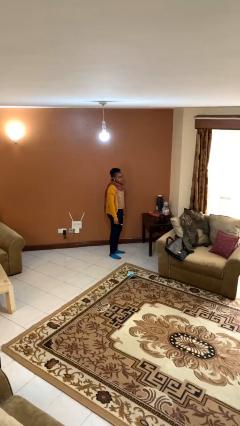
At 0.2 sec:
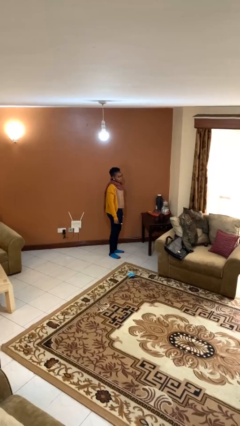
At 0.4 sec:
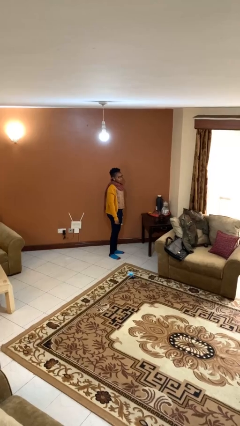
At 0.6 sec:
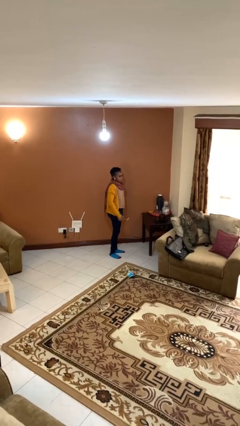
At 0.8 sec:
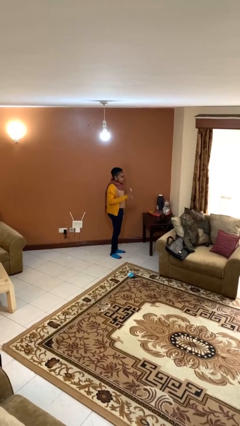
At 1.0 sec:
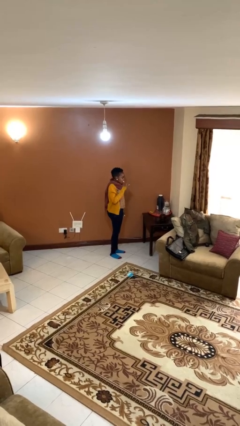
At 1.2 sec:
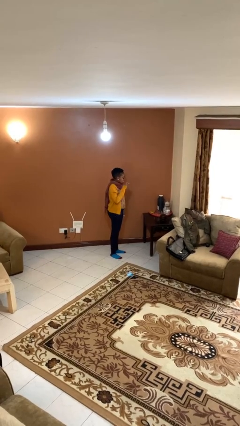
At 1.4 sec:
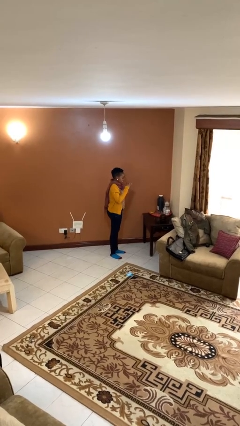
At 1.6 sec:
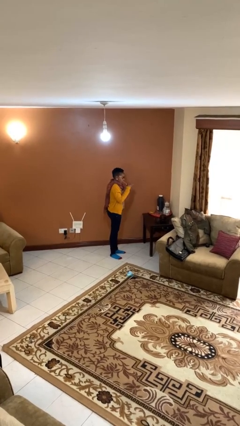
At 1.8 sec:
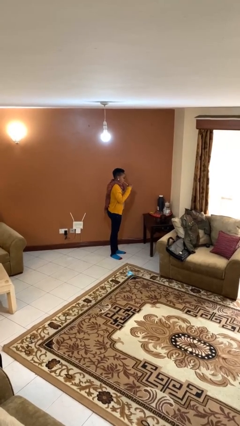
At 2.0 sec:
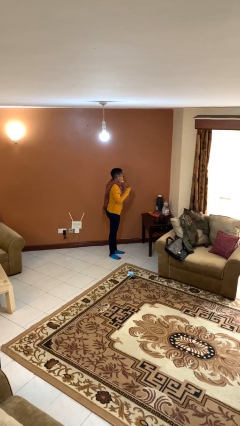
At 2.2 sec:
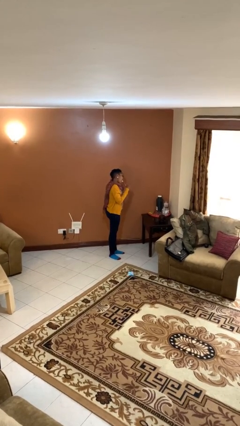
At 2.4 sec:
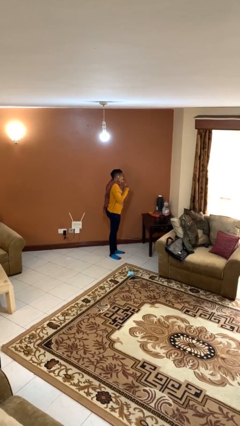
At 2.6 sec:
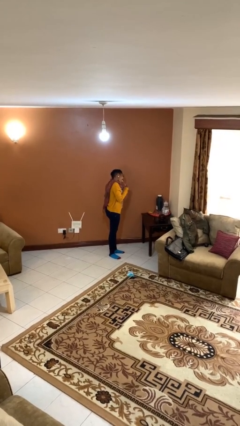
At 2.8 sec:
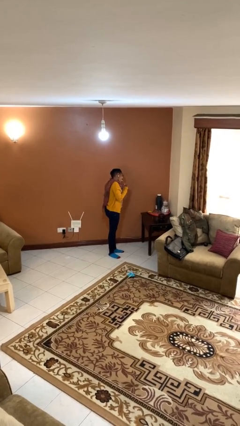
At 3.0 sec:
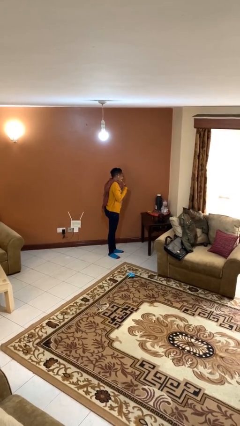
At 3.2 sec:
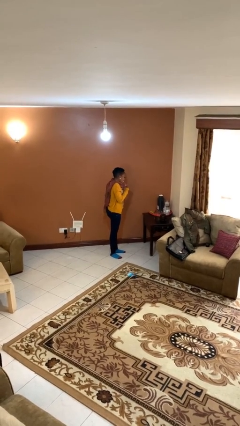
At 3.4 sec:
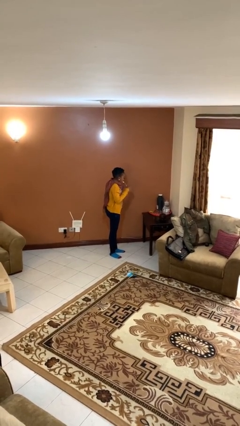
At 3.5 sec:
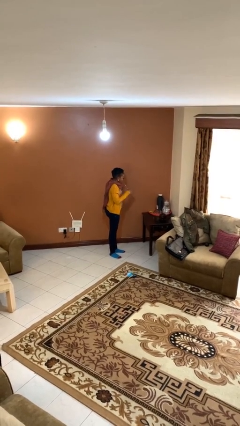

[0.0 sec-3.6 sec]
person brushes teeth

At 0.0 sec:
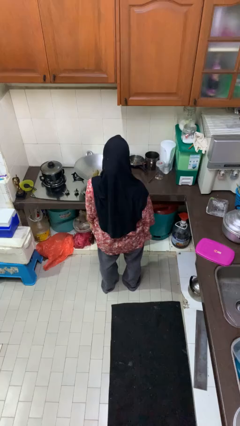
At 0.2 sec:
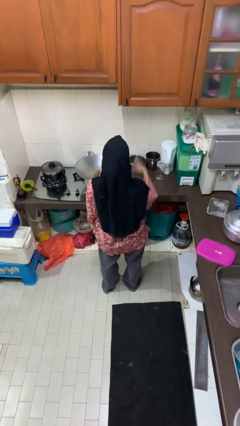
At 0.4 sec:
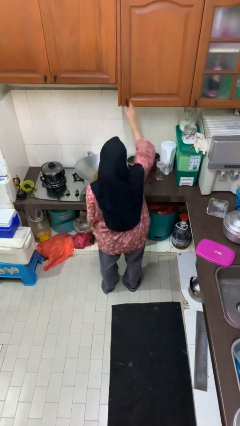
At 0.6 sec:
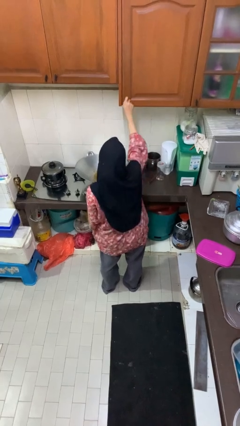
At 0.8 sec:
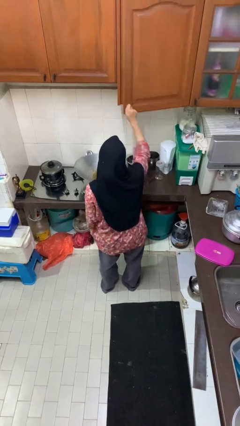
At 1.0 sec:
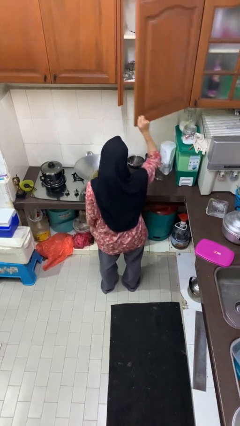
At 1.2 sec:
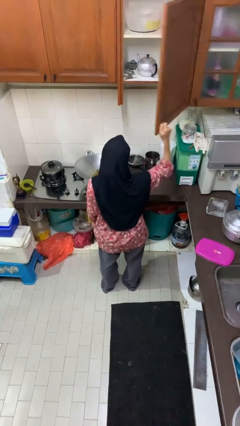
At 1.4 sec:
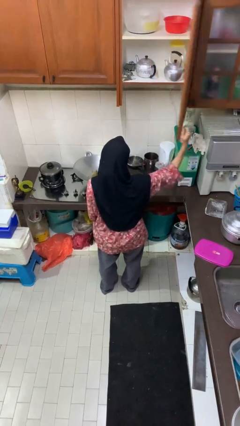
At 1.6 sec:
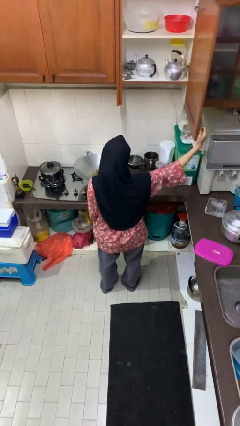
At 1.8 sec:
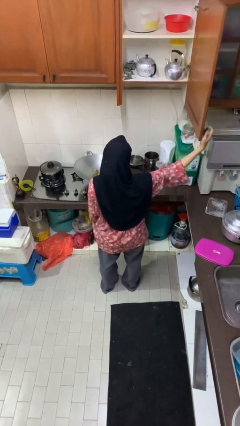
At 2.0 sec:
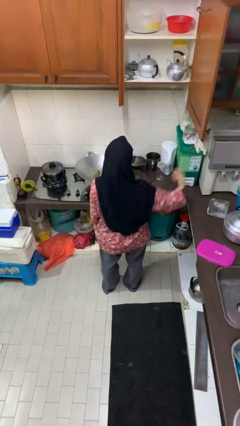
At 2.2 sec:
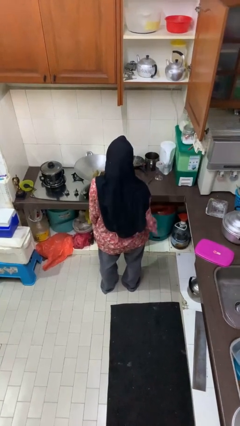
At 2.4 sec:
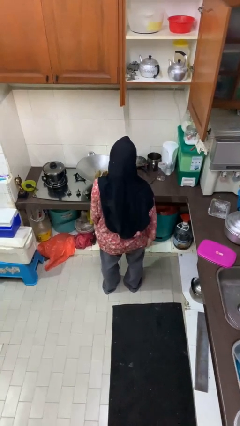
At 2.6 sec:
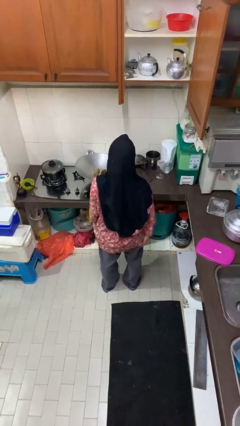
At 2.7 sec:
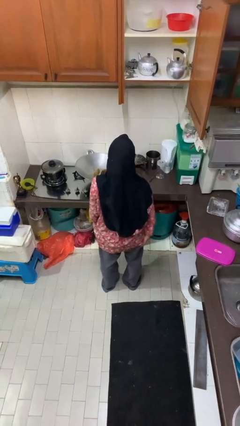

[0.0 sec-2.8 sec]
person opens cabinet

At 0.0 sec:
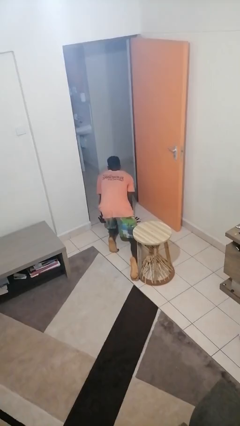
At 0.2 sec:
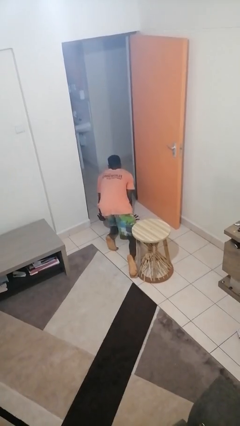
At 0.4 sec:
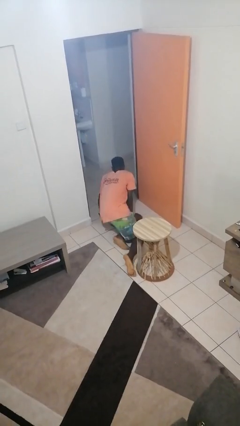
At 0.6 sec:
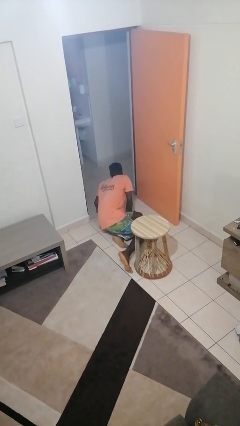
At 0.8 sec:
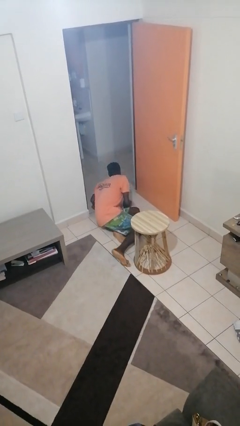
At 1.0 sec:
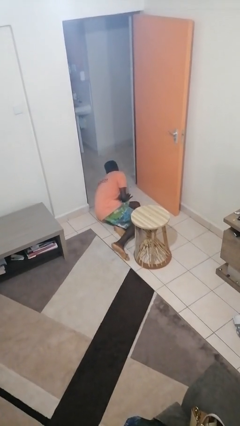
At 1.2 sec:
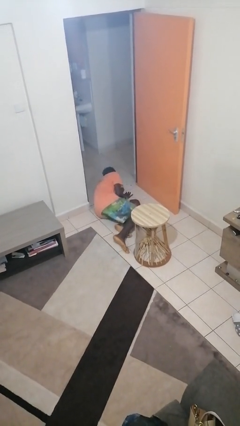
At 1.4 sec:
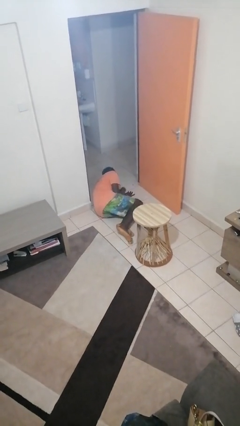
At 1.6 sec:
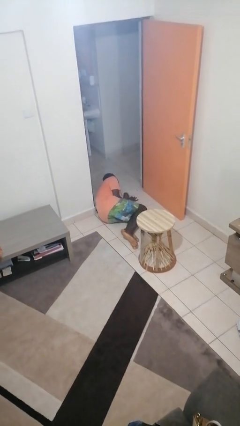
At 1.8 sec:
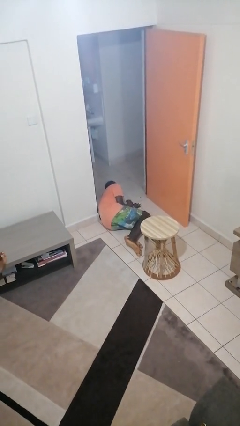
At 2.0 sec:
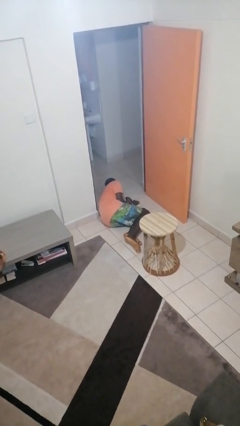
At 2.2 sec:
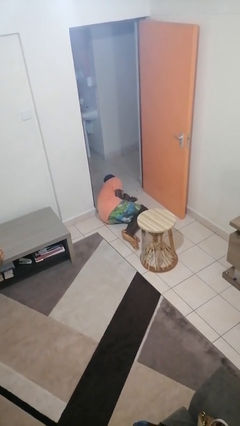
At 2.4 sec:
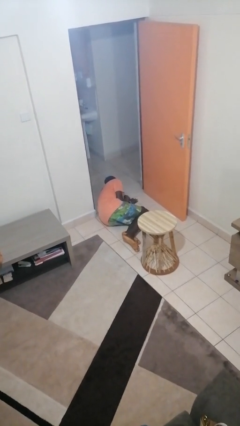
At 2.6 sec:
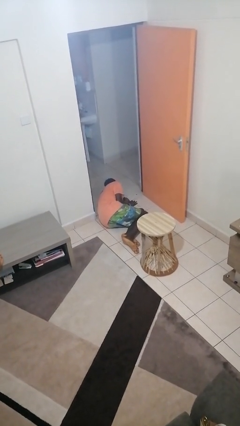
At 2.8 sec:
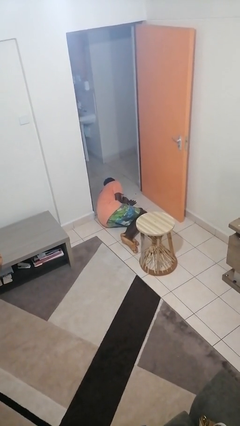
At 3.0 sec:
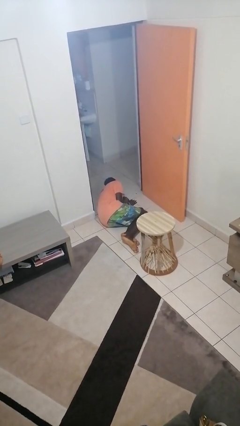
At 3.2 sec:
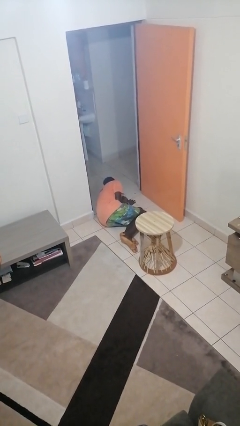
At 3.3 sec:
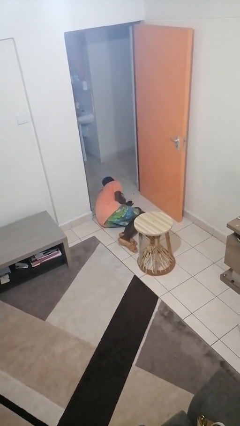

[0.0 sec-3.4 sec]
person lies down on floor

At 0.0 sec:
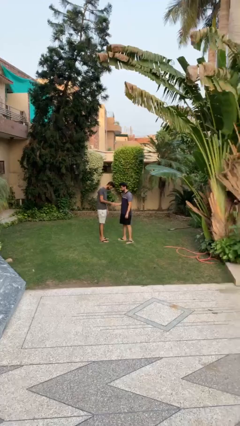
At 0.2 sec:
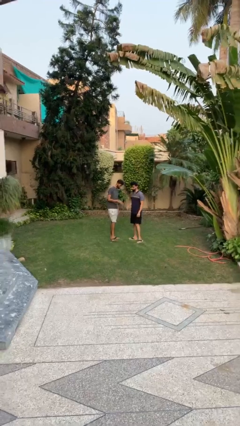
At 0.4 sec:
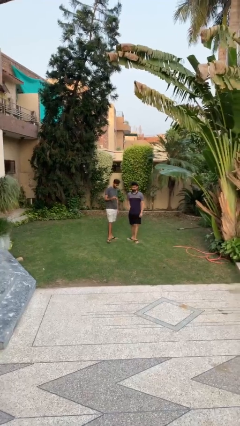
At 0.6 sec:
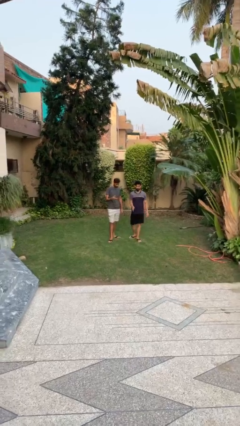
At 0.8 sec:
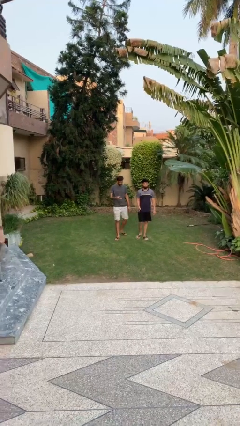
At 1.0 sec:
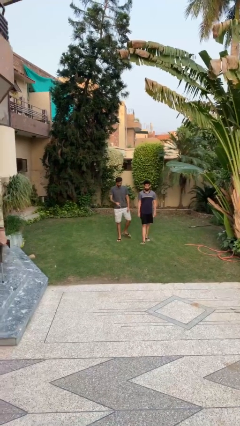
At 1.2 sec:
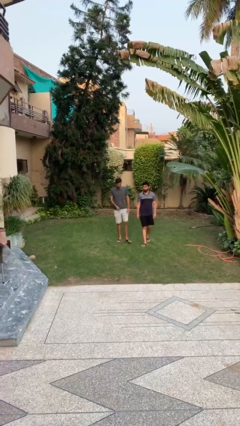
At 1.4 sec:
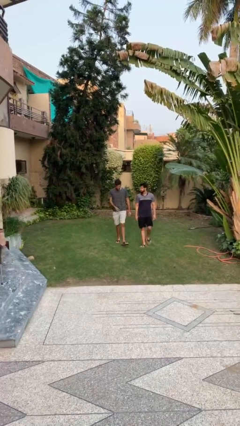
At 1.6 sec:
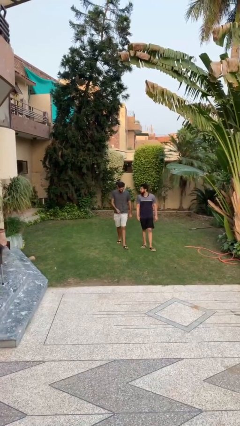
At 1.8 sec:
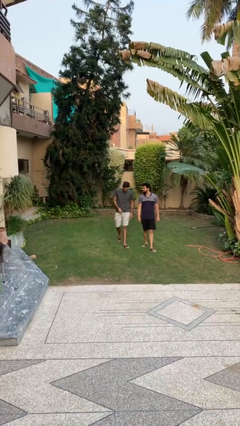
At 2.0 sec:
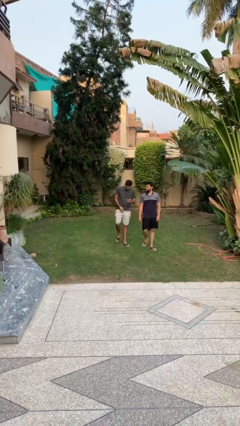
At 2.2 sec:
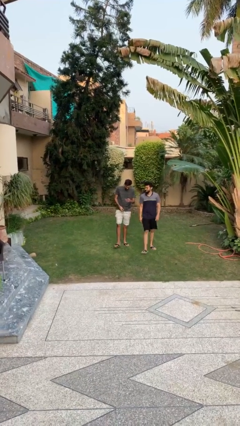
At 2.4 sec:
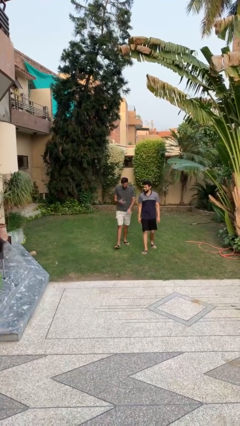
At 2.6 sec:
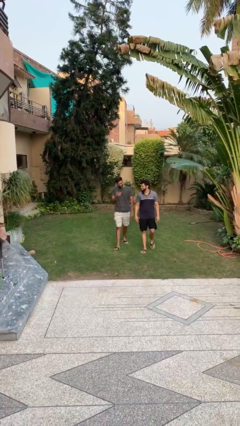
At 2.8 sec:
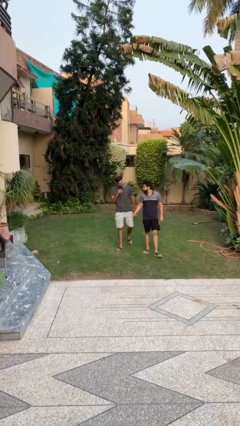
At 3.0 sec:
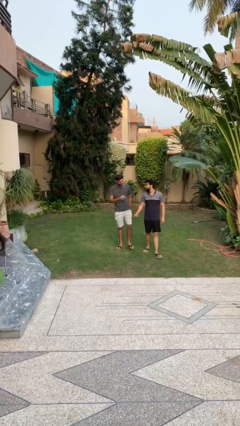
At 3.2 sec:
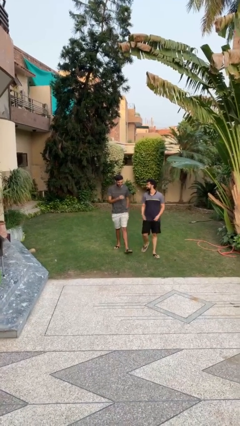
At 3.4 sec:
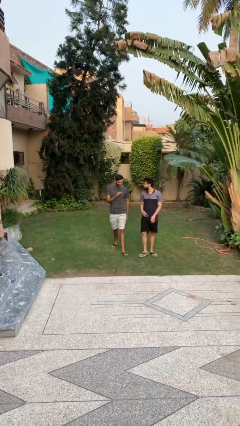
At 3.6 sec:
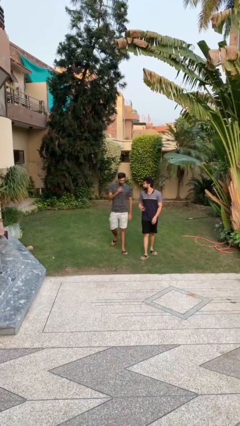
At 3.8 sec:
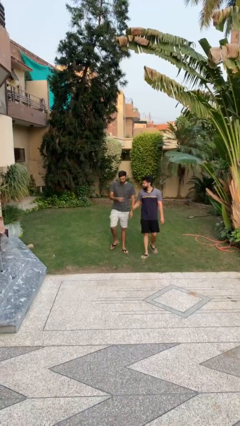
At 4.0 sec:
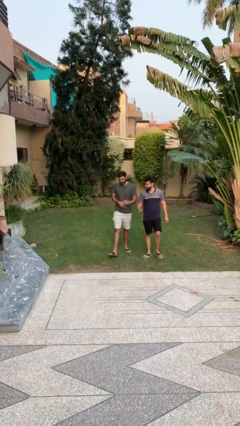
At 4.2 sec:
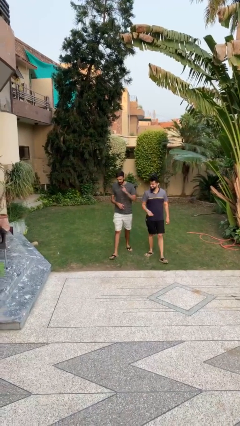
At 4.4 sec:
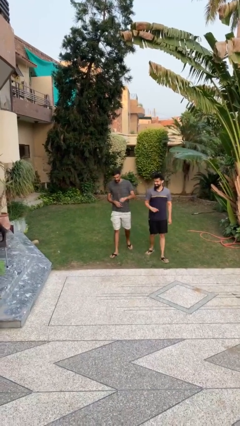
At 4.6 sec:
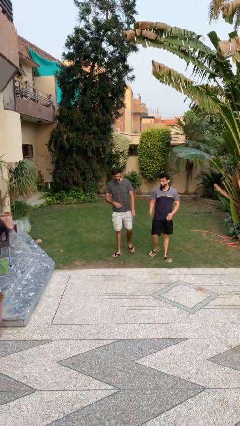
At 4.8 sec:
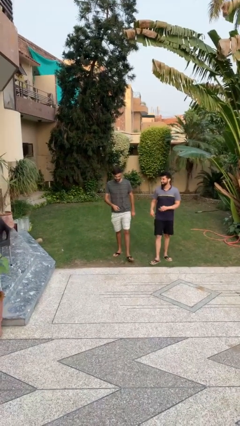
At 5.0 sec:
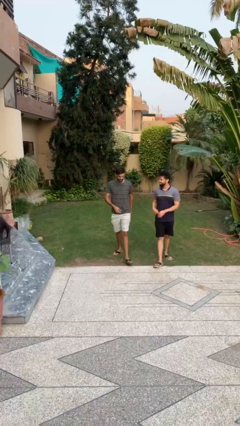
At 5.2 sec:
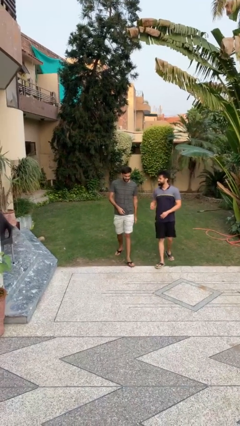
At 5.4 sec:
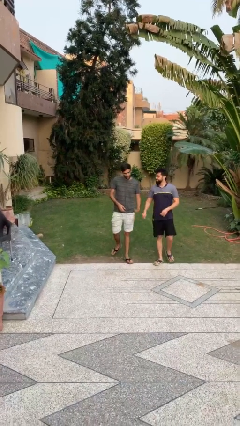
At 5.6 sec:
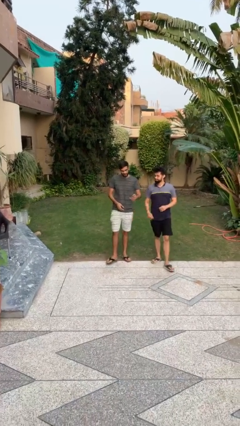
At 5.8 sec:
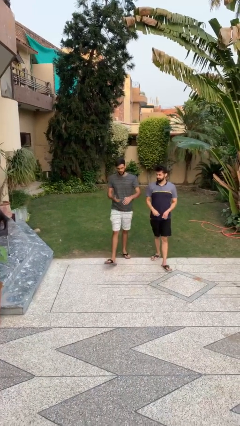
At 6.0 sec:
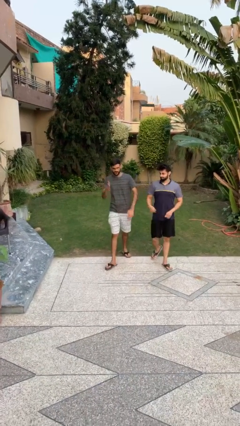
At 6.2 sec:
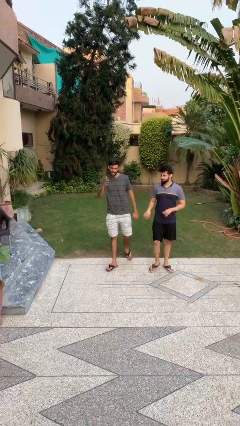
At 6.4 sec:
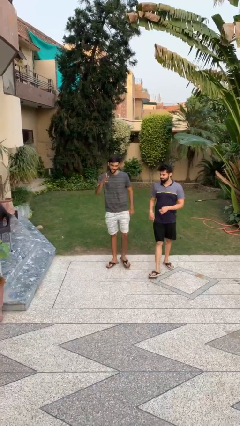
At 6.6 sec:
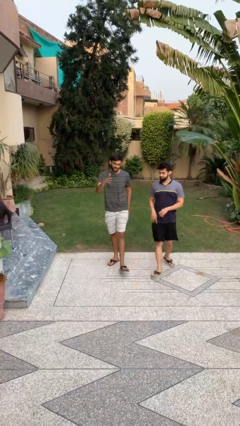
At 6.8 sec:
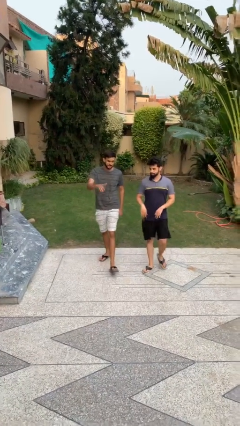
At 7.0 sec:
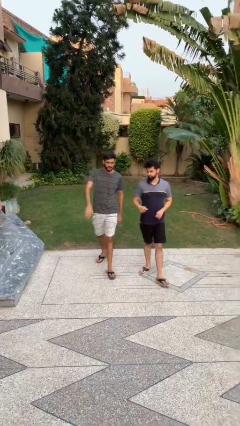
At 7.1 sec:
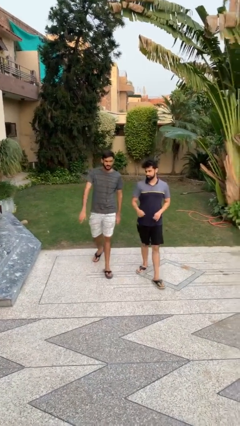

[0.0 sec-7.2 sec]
person talks to person

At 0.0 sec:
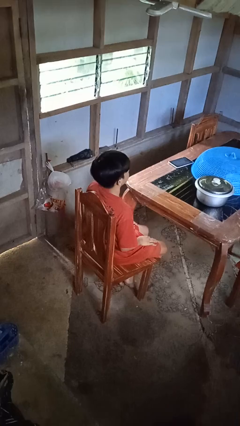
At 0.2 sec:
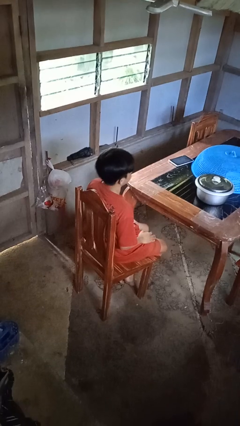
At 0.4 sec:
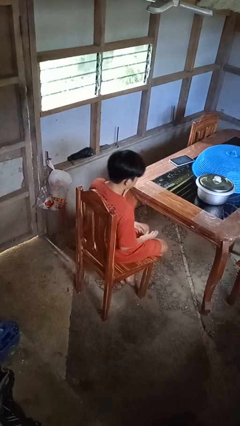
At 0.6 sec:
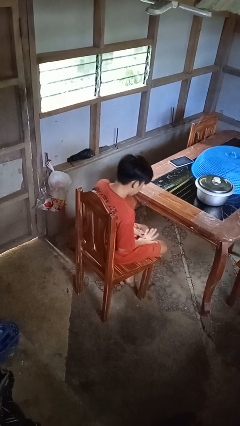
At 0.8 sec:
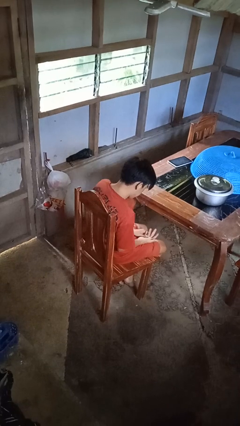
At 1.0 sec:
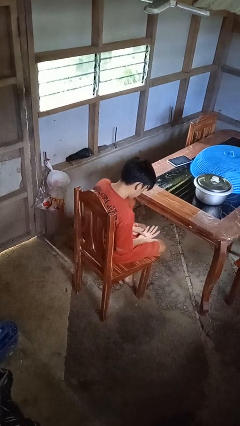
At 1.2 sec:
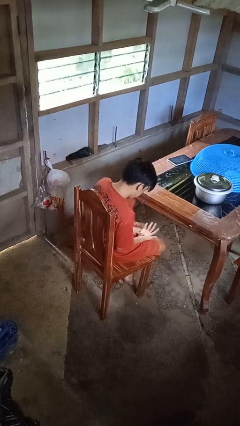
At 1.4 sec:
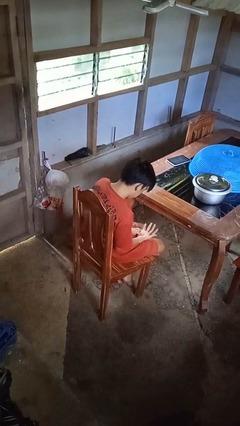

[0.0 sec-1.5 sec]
person looks at hands in lap
